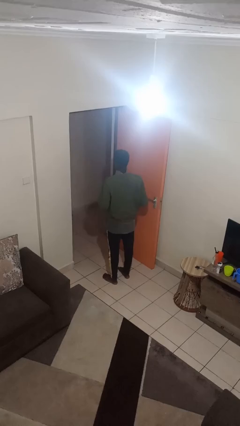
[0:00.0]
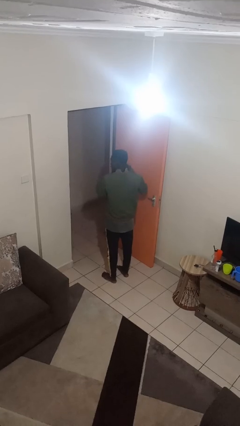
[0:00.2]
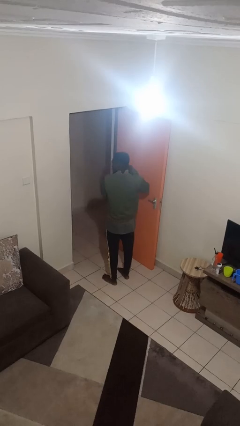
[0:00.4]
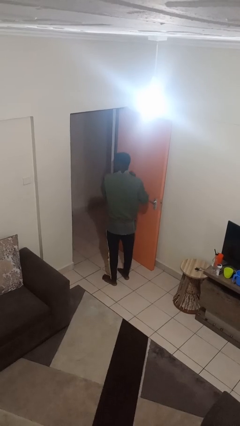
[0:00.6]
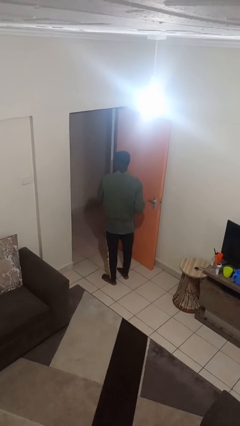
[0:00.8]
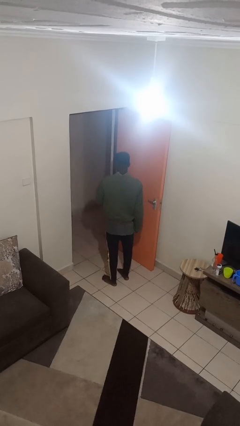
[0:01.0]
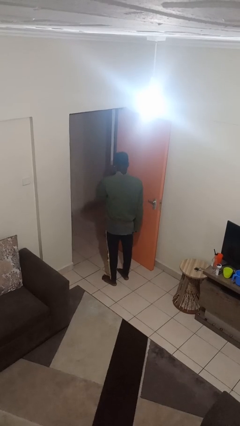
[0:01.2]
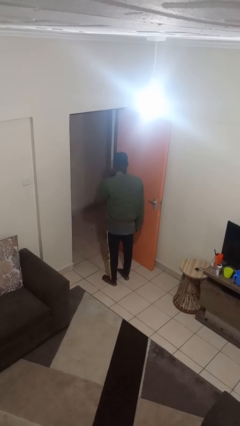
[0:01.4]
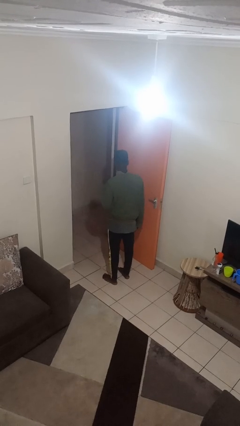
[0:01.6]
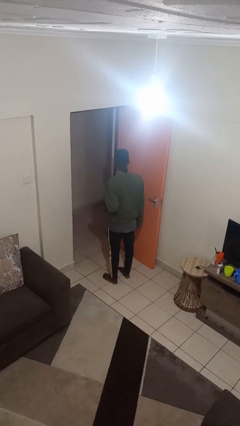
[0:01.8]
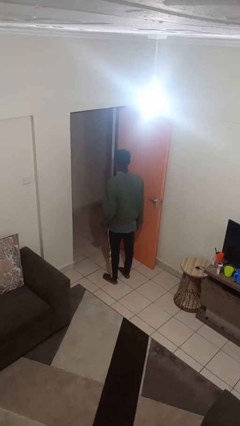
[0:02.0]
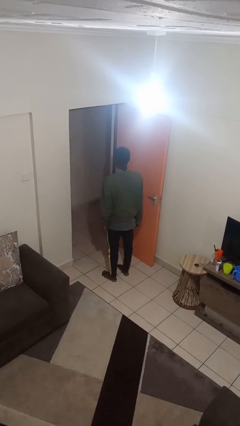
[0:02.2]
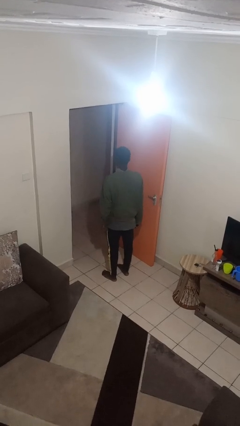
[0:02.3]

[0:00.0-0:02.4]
person takes off earrings

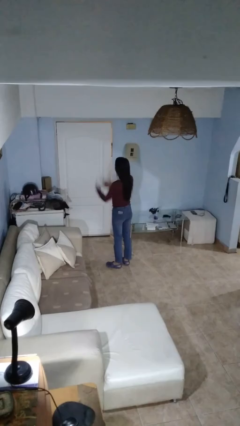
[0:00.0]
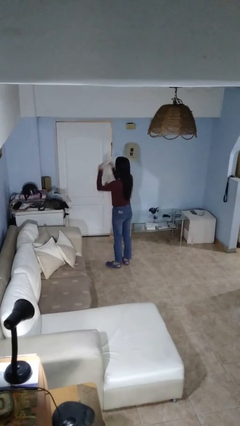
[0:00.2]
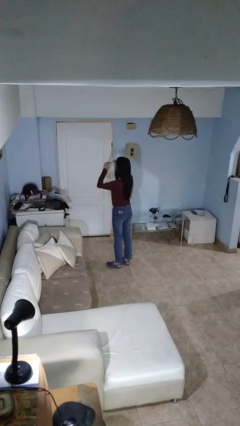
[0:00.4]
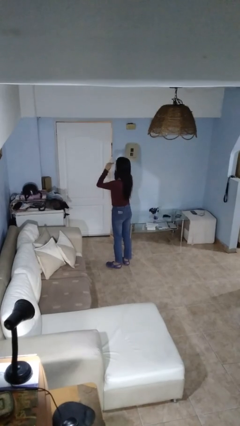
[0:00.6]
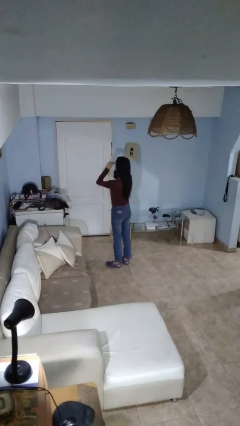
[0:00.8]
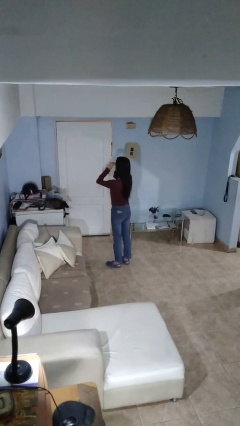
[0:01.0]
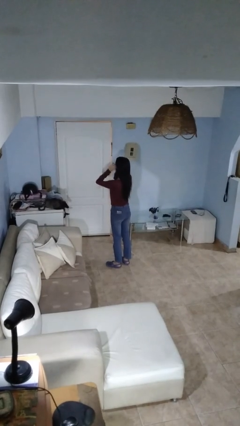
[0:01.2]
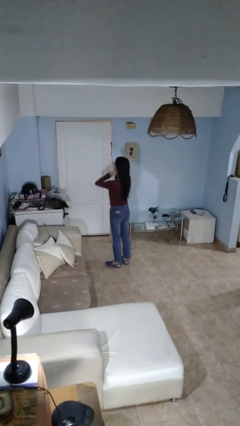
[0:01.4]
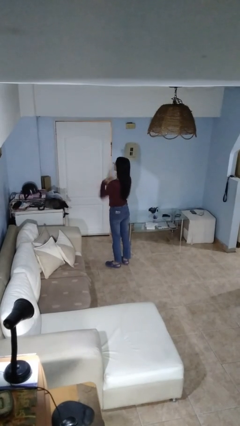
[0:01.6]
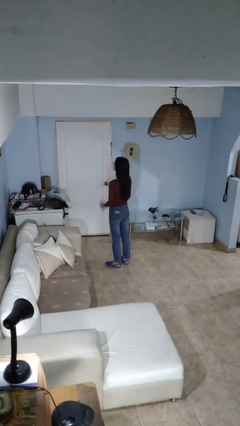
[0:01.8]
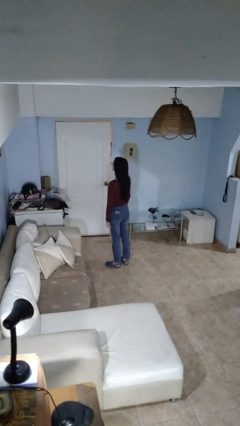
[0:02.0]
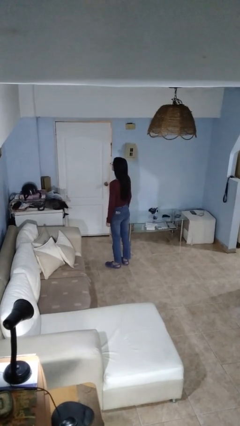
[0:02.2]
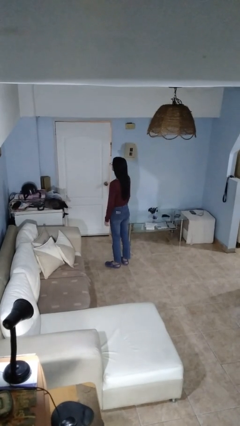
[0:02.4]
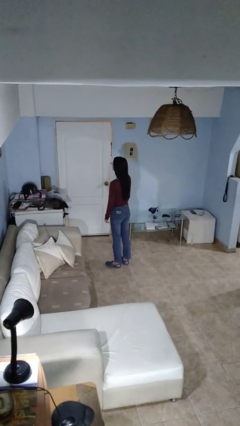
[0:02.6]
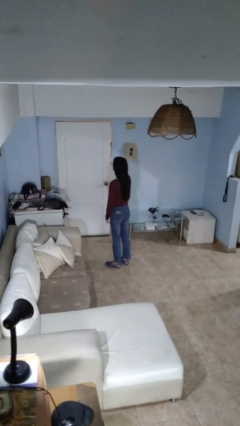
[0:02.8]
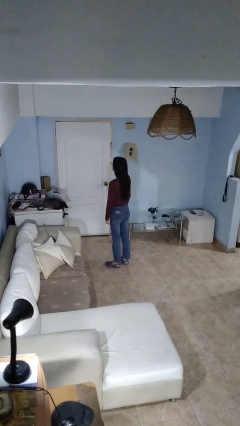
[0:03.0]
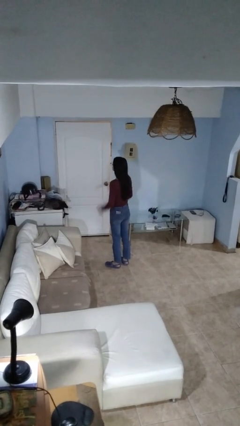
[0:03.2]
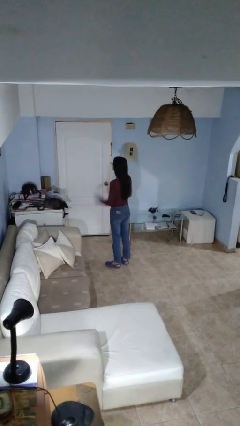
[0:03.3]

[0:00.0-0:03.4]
person puts on glasses

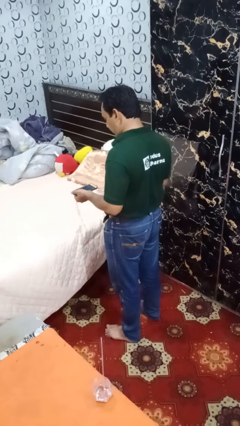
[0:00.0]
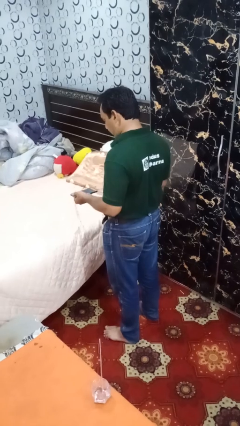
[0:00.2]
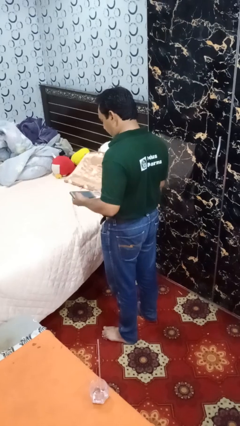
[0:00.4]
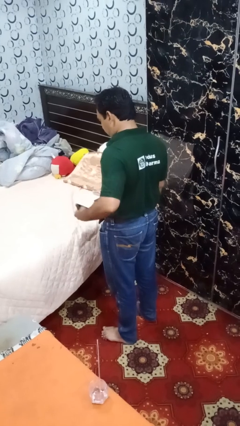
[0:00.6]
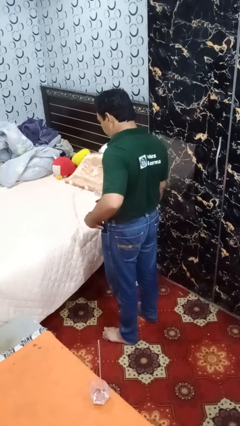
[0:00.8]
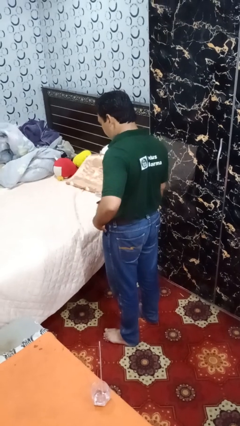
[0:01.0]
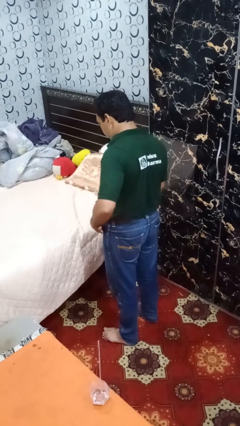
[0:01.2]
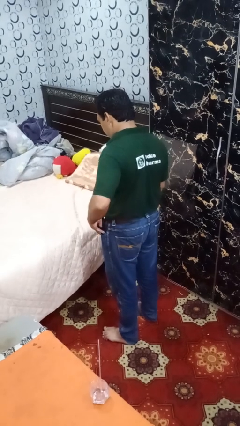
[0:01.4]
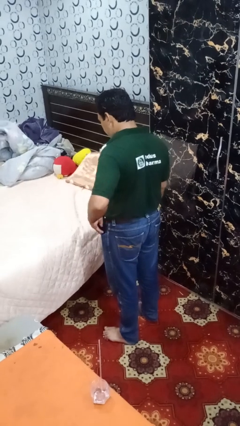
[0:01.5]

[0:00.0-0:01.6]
person puts phone into pocket

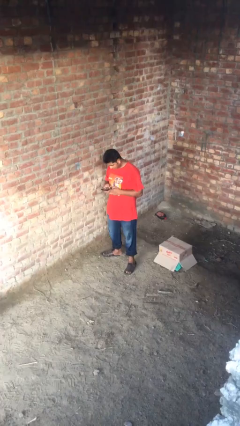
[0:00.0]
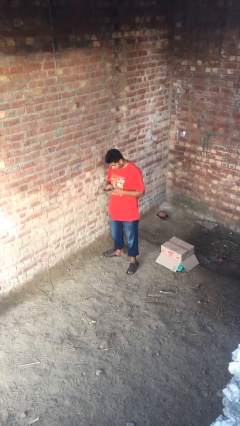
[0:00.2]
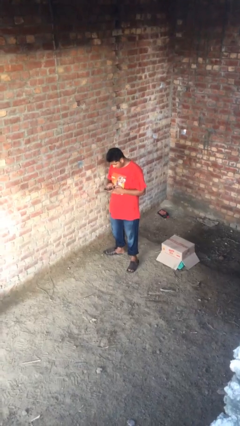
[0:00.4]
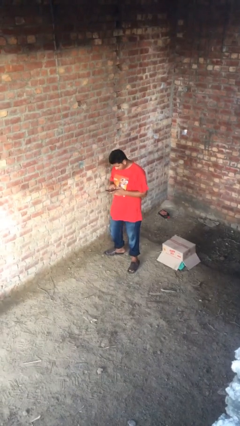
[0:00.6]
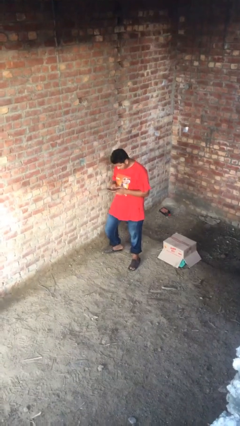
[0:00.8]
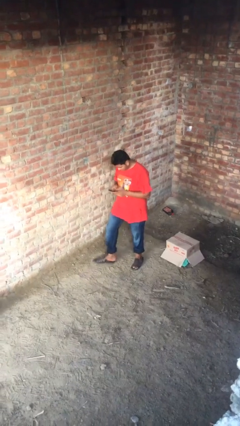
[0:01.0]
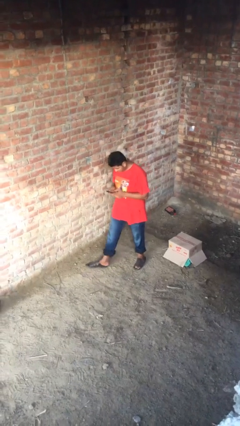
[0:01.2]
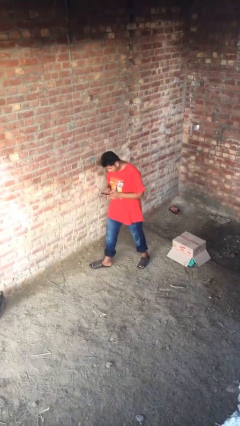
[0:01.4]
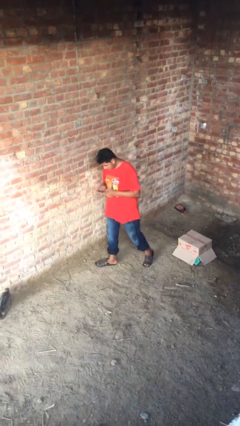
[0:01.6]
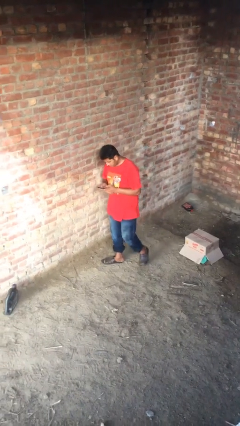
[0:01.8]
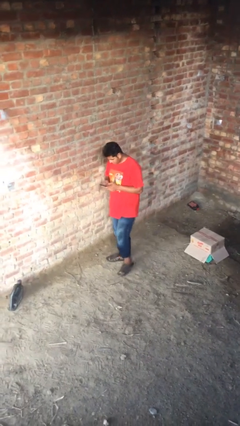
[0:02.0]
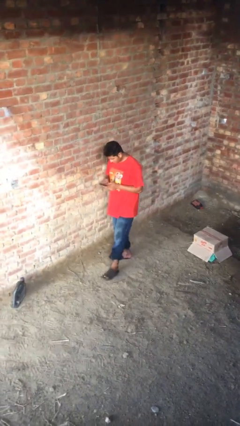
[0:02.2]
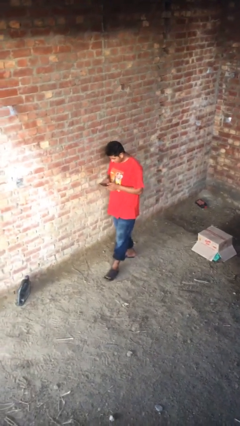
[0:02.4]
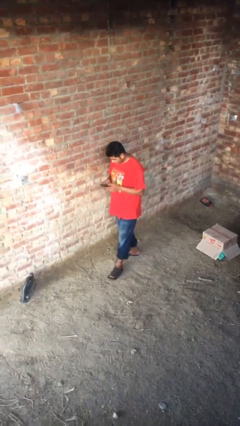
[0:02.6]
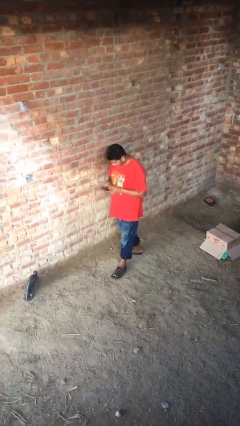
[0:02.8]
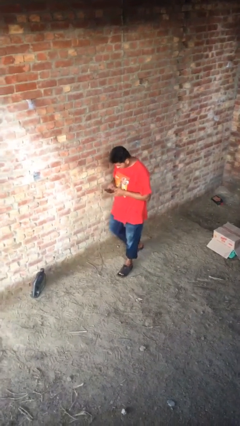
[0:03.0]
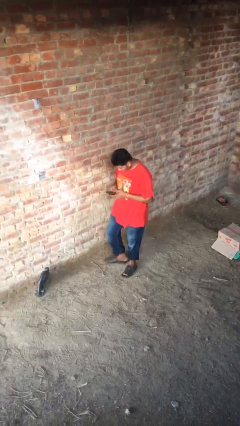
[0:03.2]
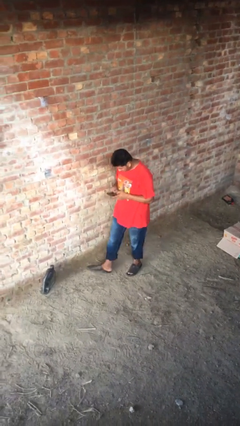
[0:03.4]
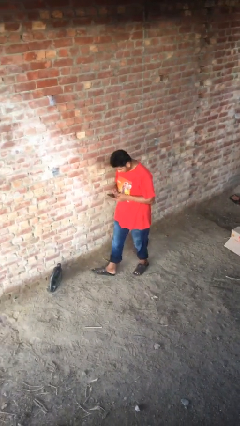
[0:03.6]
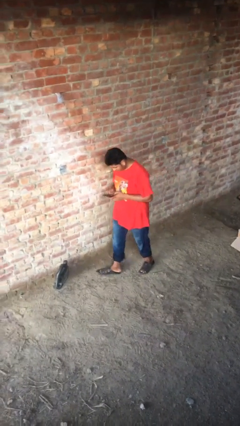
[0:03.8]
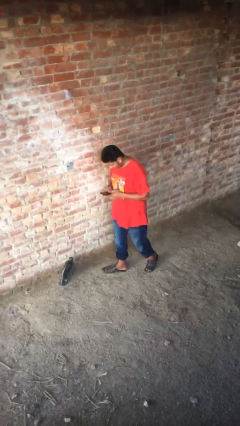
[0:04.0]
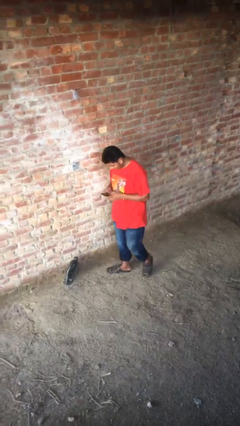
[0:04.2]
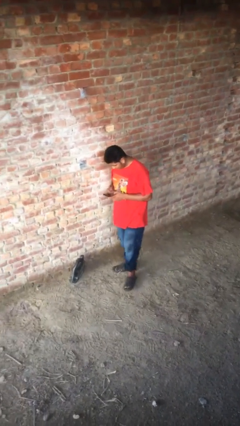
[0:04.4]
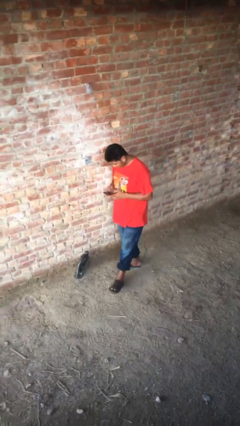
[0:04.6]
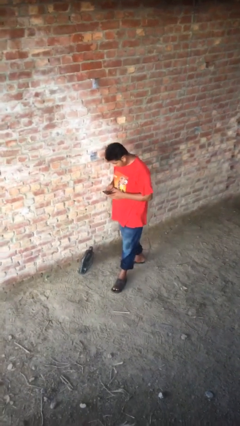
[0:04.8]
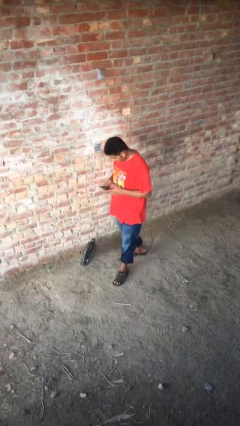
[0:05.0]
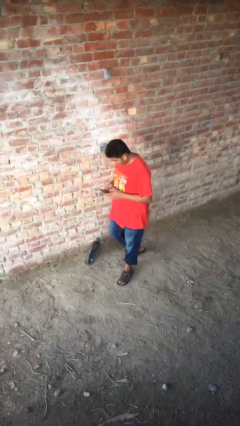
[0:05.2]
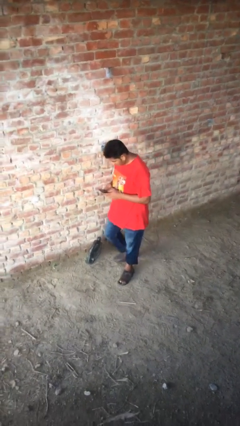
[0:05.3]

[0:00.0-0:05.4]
person texts on phone

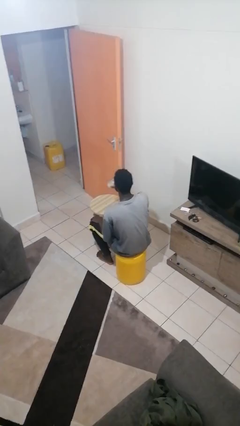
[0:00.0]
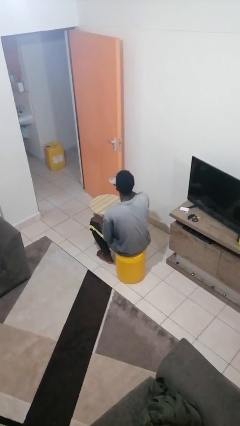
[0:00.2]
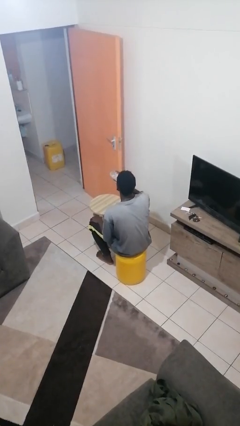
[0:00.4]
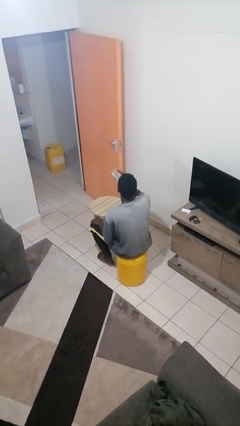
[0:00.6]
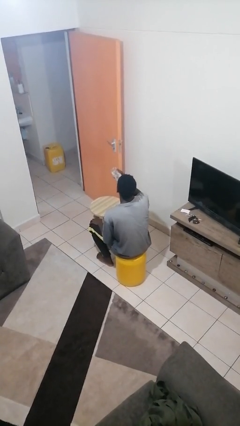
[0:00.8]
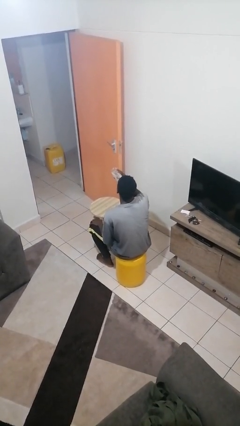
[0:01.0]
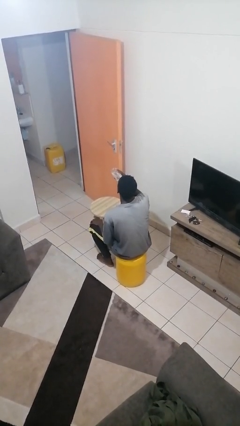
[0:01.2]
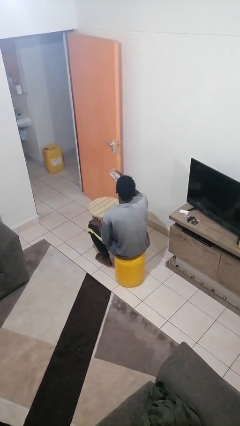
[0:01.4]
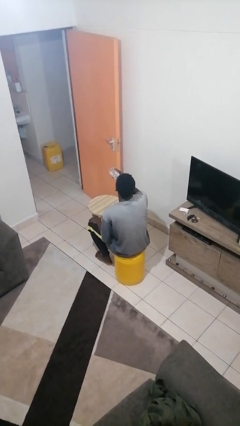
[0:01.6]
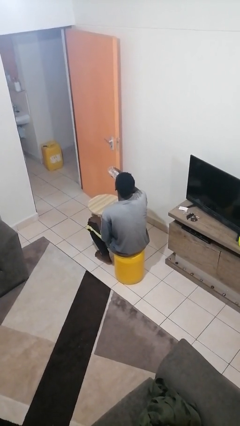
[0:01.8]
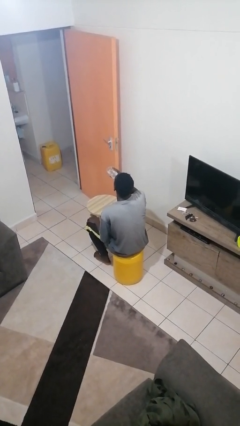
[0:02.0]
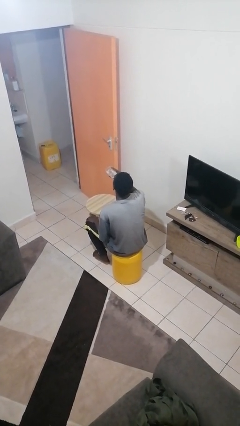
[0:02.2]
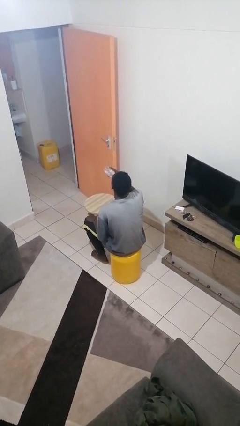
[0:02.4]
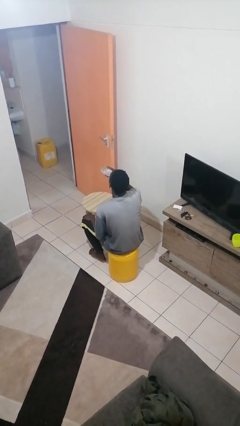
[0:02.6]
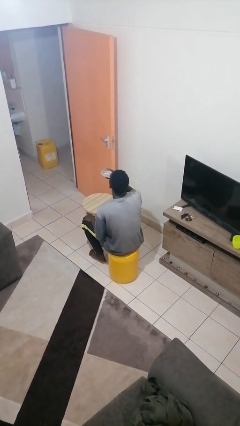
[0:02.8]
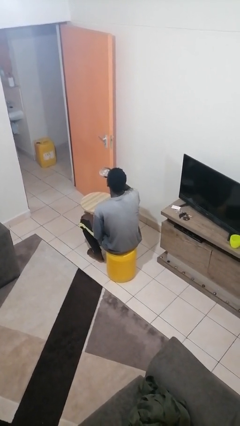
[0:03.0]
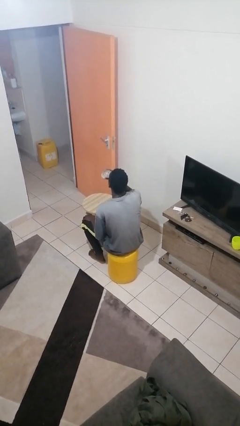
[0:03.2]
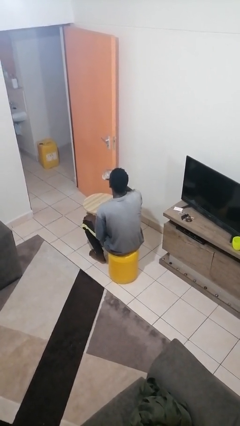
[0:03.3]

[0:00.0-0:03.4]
person drinks from bottle

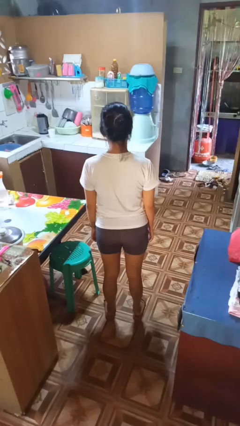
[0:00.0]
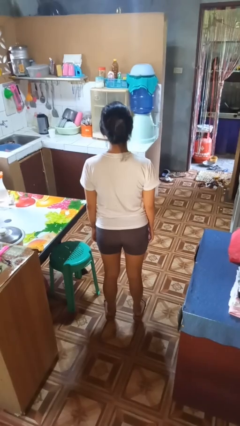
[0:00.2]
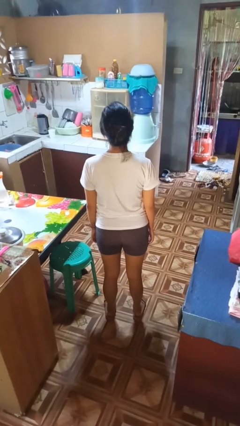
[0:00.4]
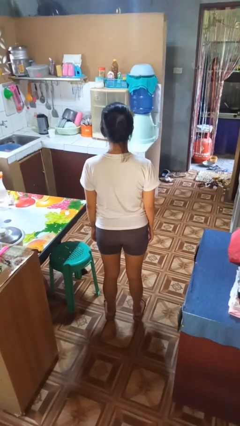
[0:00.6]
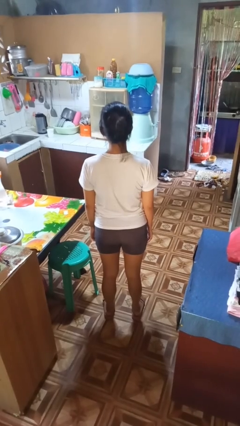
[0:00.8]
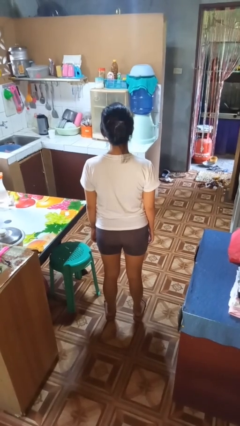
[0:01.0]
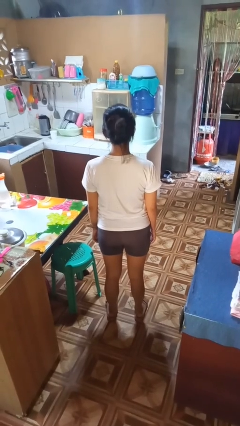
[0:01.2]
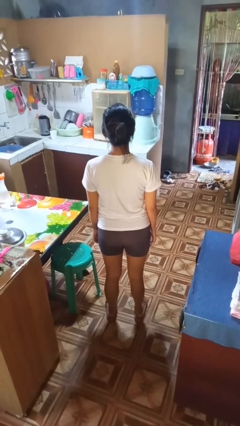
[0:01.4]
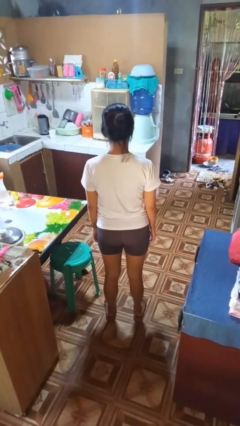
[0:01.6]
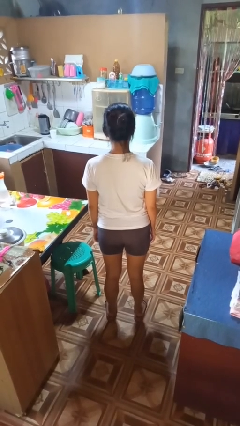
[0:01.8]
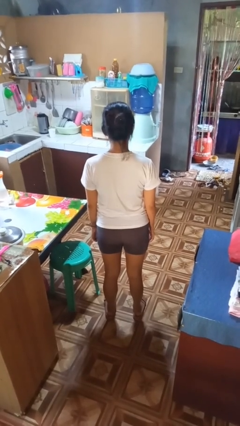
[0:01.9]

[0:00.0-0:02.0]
person nods head
